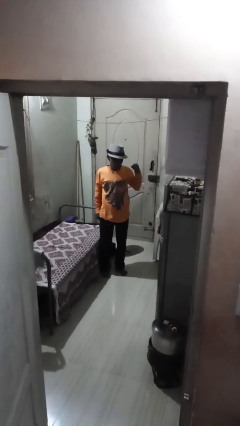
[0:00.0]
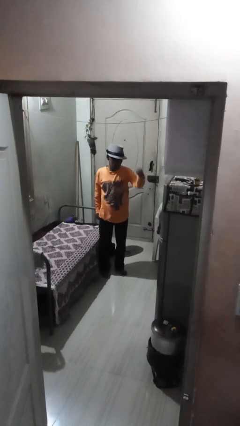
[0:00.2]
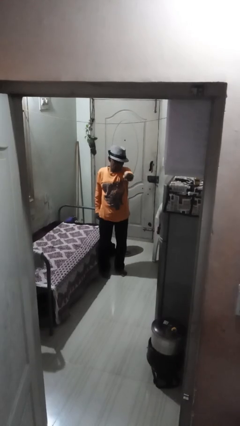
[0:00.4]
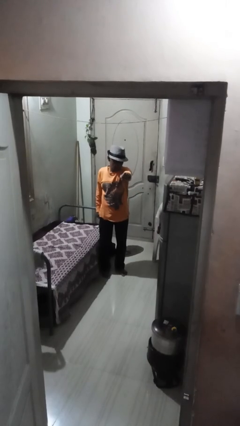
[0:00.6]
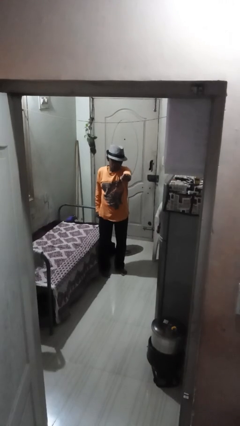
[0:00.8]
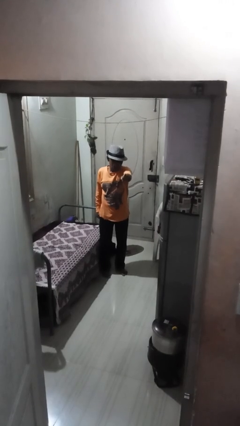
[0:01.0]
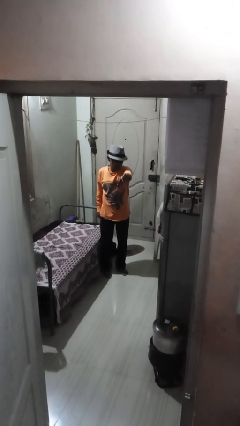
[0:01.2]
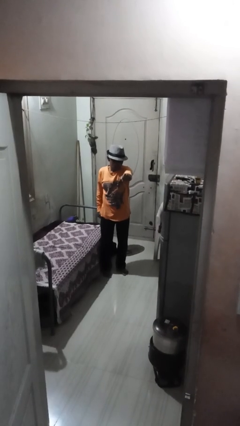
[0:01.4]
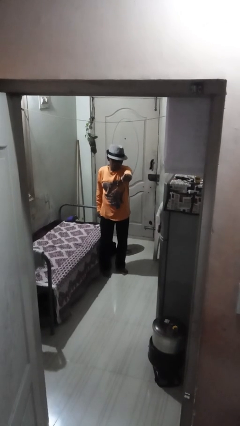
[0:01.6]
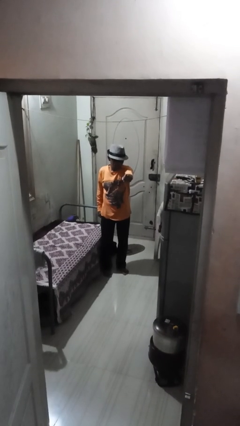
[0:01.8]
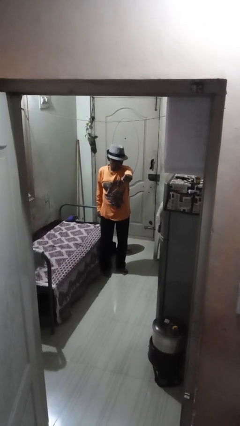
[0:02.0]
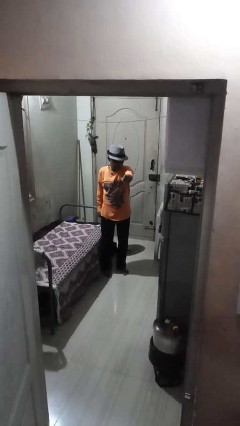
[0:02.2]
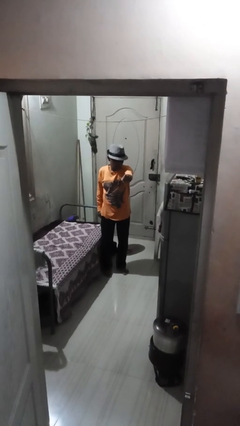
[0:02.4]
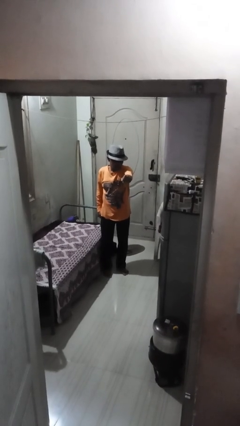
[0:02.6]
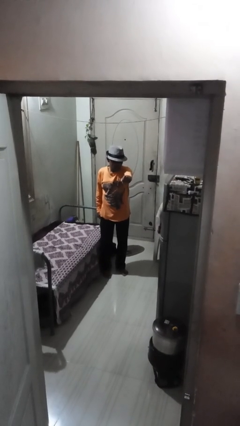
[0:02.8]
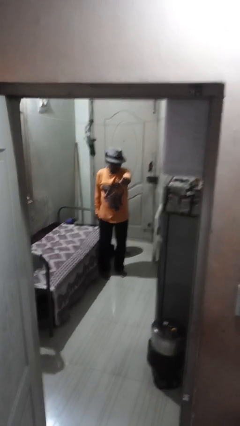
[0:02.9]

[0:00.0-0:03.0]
person punches

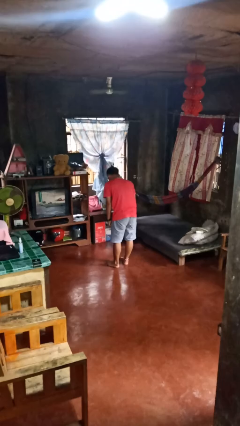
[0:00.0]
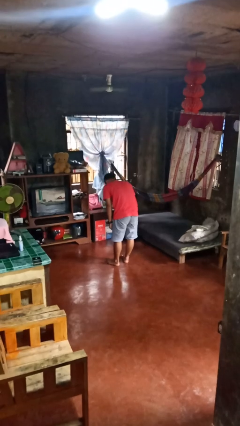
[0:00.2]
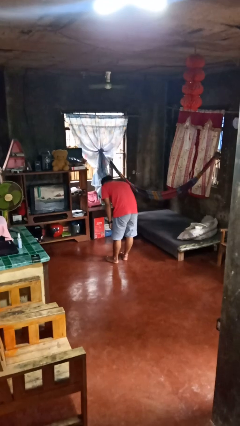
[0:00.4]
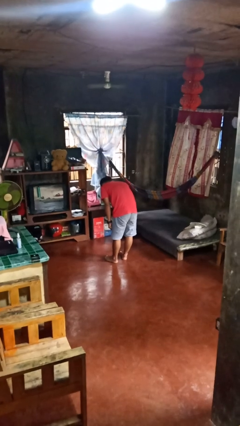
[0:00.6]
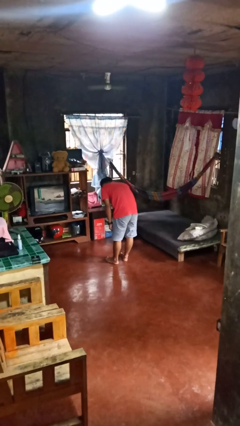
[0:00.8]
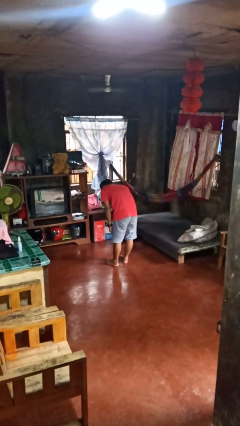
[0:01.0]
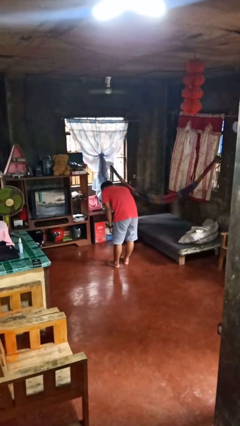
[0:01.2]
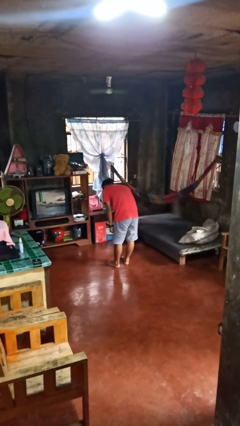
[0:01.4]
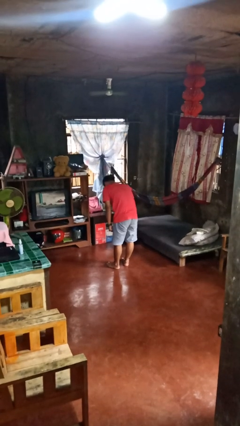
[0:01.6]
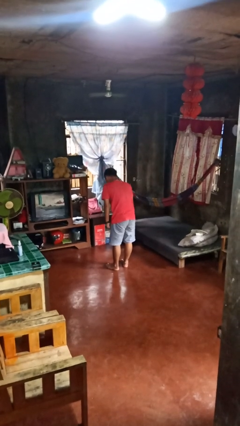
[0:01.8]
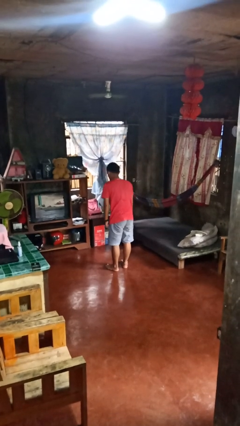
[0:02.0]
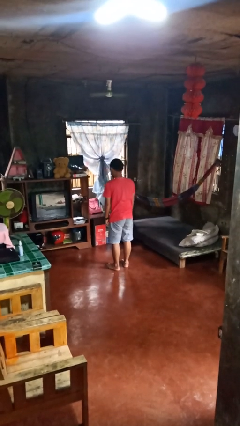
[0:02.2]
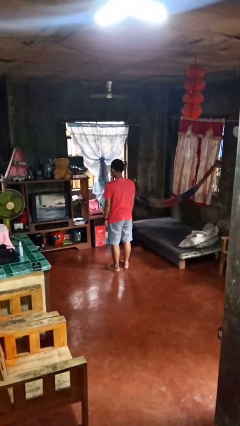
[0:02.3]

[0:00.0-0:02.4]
person bows

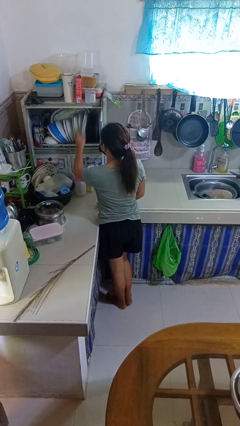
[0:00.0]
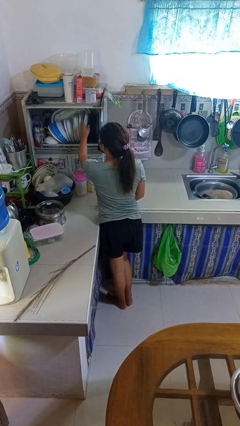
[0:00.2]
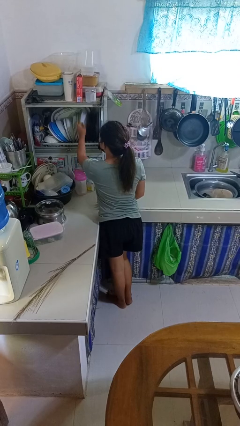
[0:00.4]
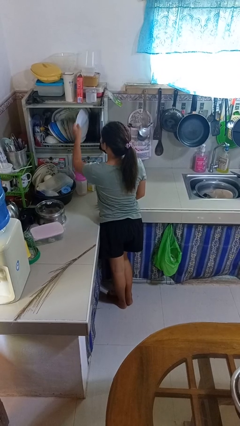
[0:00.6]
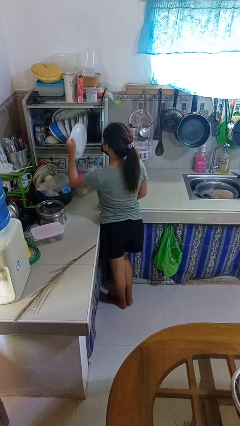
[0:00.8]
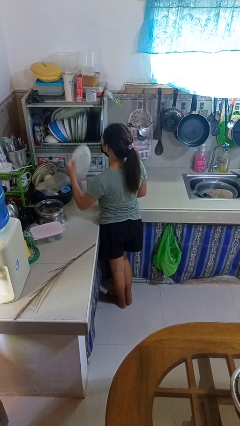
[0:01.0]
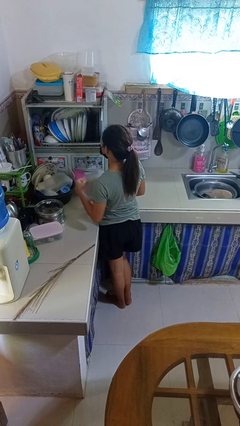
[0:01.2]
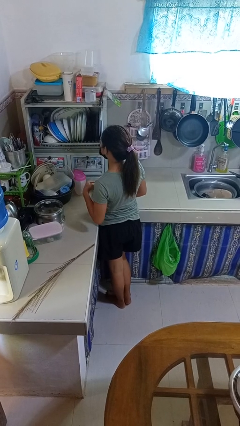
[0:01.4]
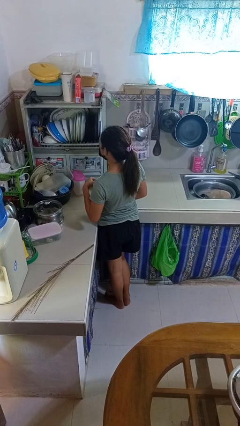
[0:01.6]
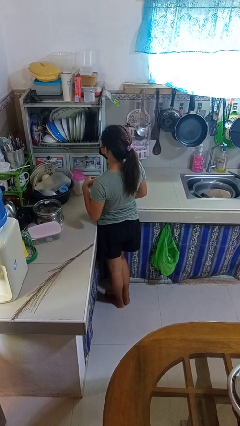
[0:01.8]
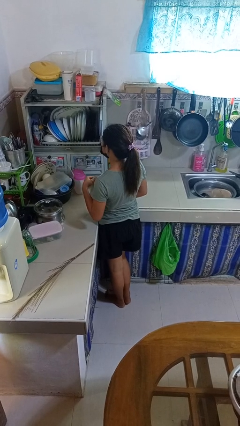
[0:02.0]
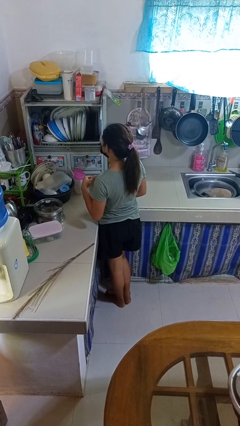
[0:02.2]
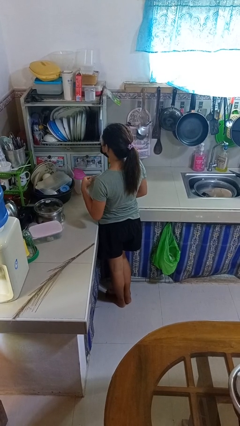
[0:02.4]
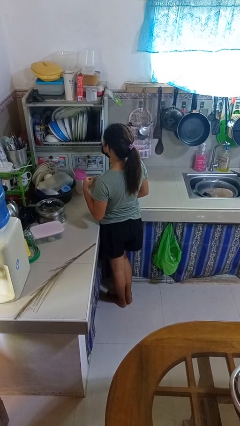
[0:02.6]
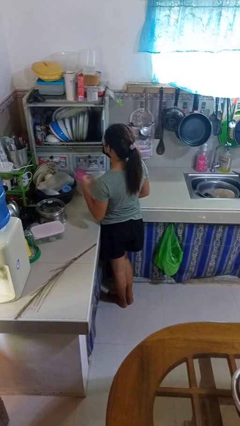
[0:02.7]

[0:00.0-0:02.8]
person takes object from kitchen drawer

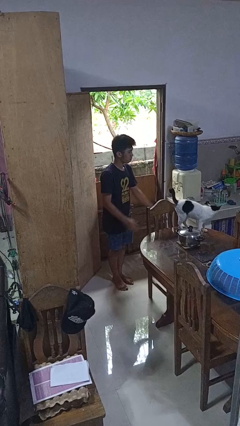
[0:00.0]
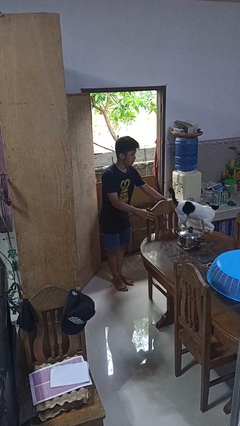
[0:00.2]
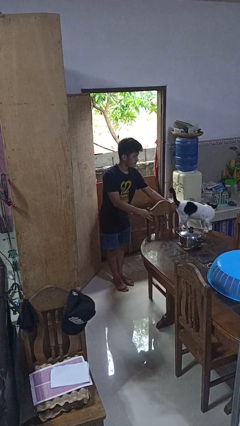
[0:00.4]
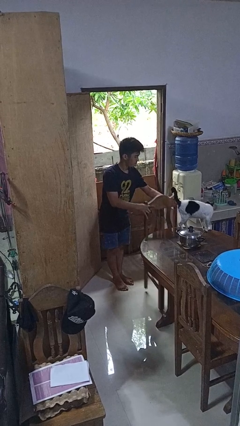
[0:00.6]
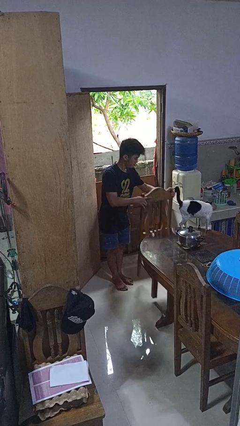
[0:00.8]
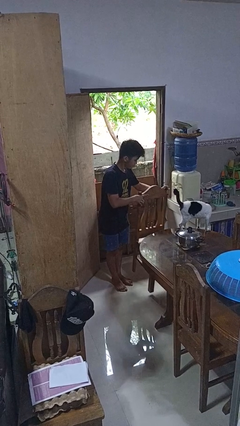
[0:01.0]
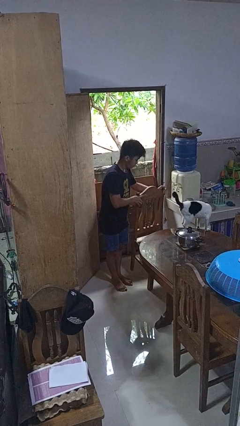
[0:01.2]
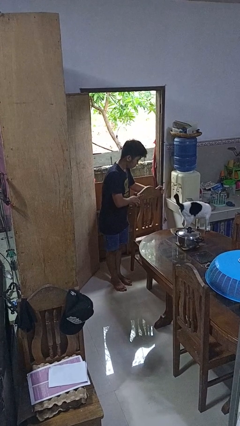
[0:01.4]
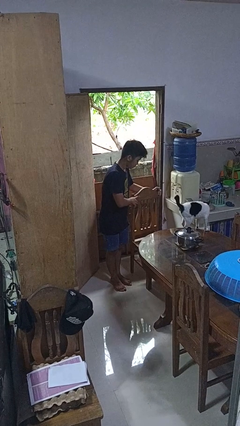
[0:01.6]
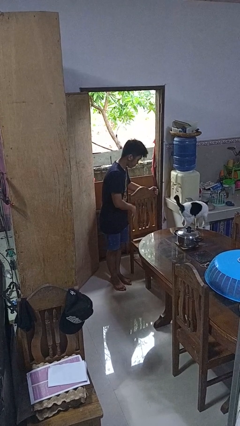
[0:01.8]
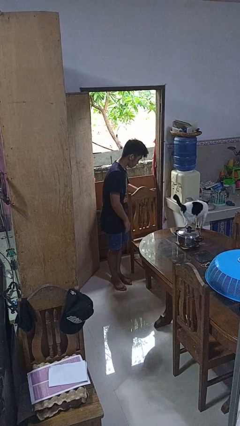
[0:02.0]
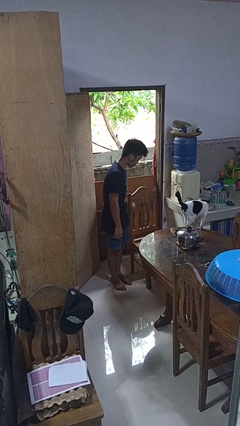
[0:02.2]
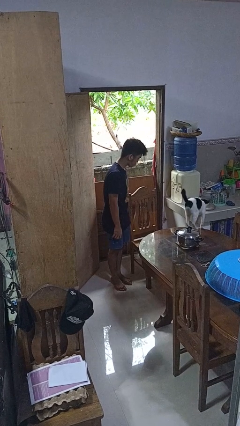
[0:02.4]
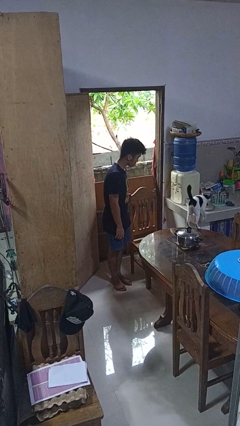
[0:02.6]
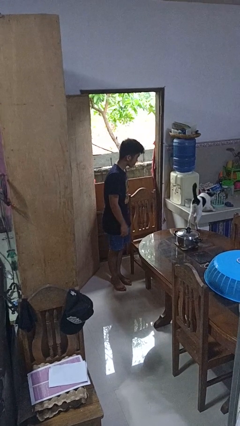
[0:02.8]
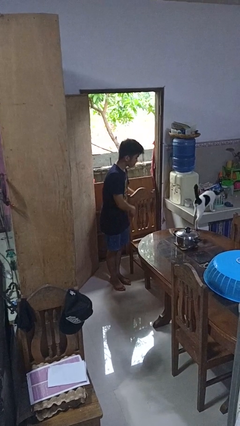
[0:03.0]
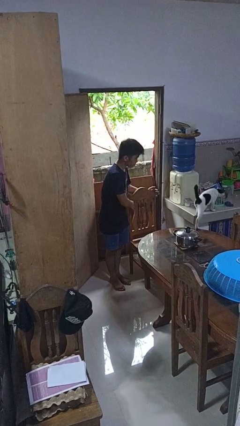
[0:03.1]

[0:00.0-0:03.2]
person pulls out chair

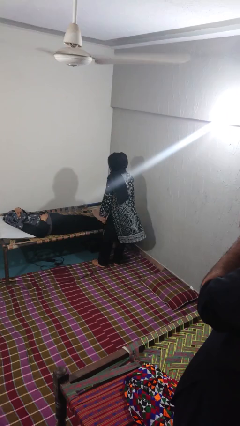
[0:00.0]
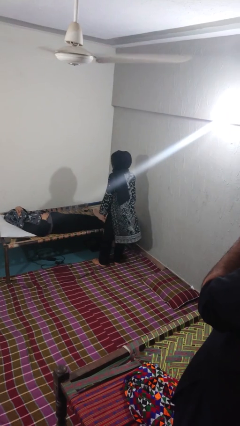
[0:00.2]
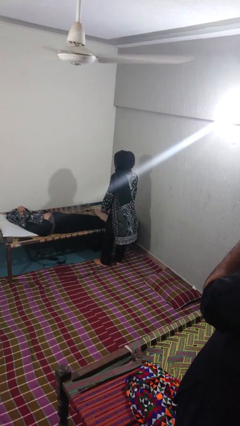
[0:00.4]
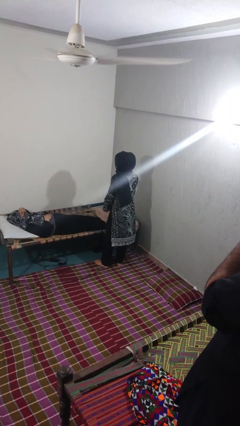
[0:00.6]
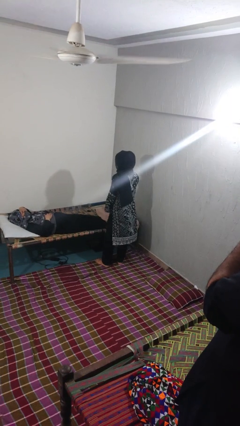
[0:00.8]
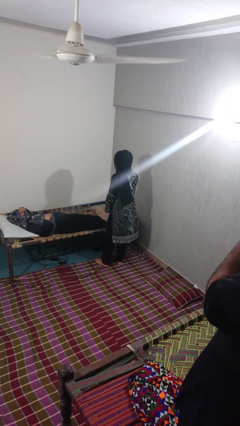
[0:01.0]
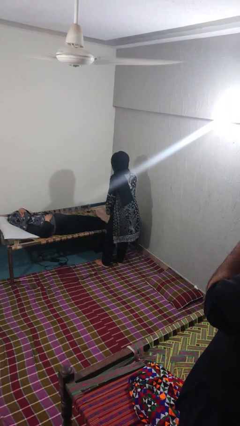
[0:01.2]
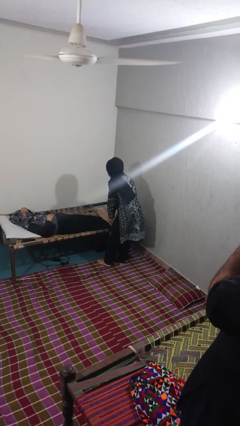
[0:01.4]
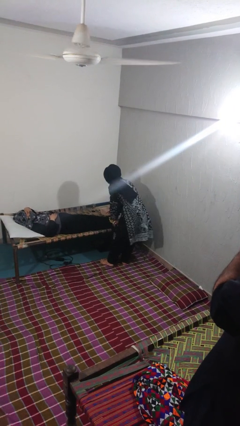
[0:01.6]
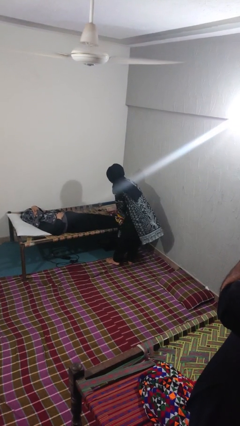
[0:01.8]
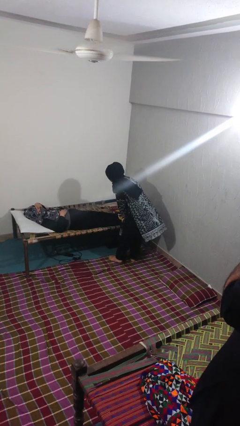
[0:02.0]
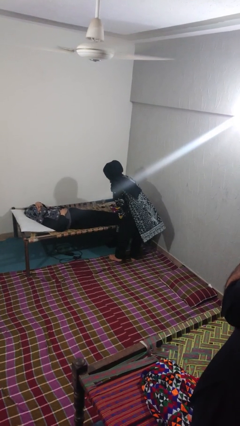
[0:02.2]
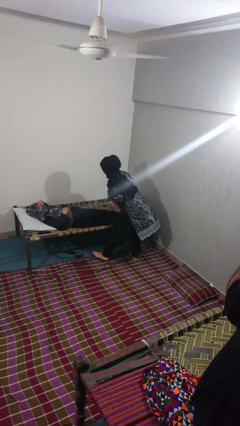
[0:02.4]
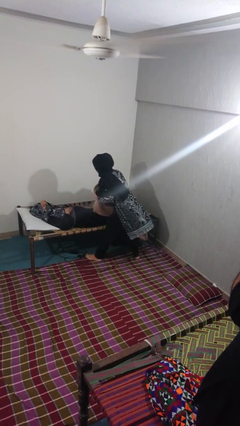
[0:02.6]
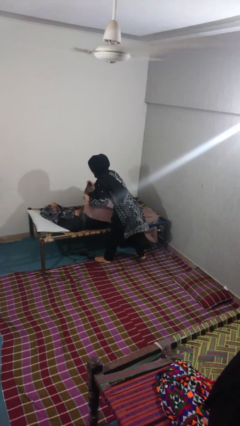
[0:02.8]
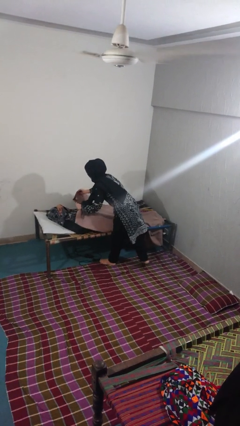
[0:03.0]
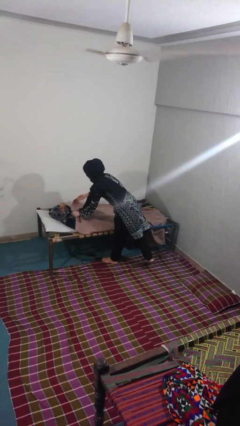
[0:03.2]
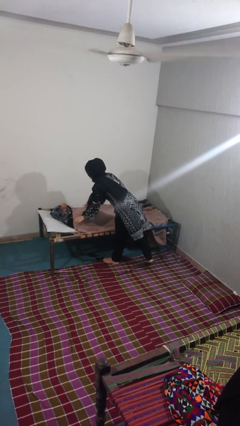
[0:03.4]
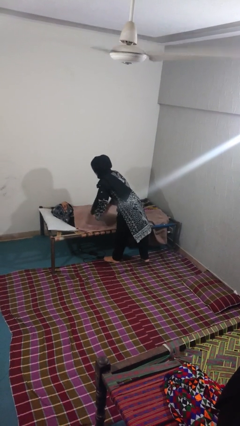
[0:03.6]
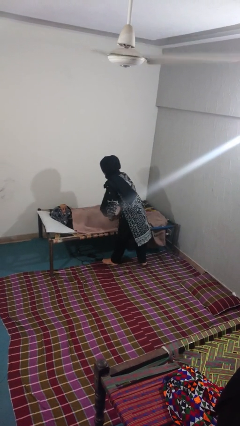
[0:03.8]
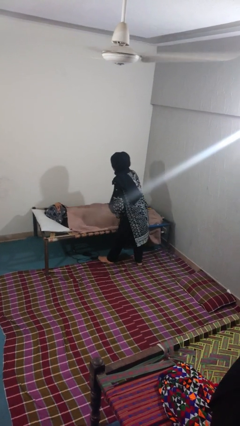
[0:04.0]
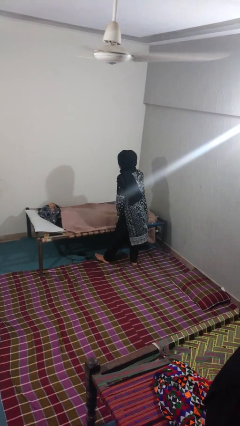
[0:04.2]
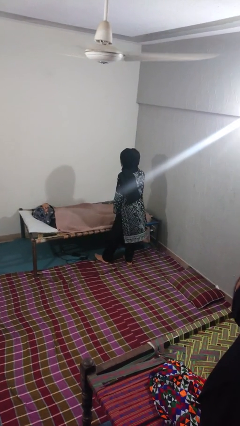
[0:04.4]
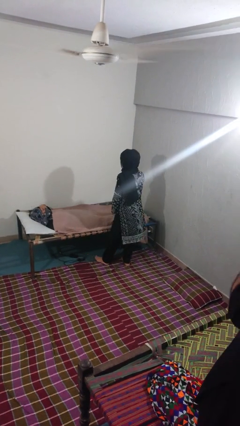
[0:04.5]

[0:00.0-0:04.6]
person covers friend with blanket

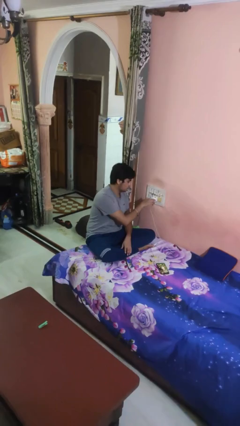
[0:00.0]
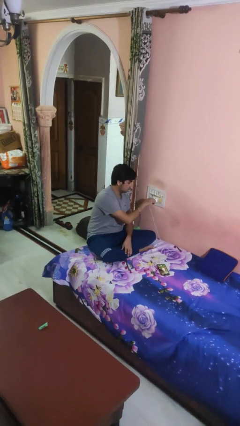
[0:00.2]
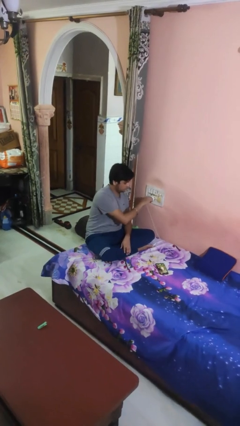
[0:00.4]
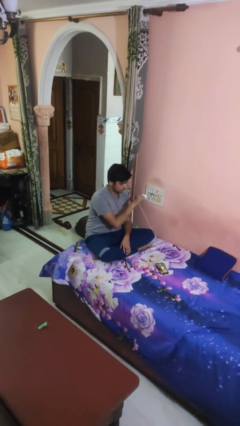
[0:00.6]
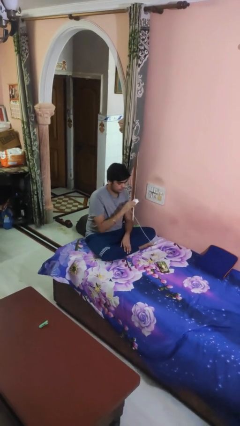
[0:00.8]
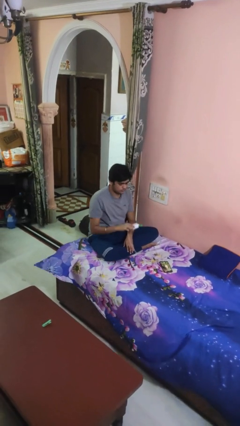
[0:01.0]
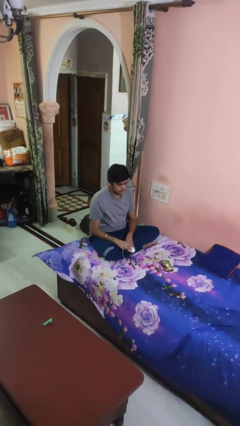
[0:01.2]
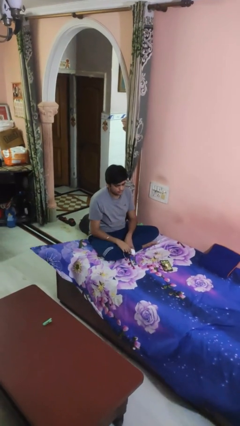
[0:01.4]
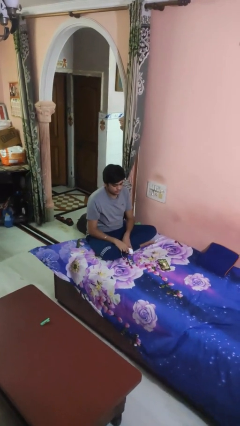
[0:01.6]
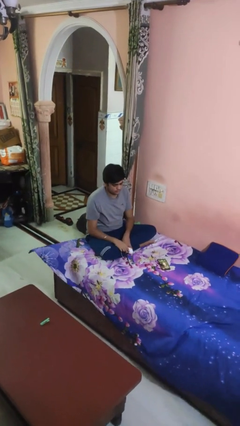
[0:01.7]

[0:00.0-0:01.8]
person unplugs from electrical socket
